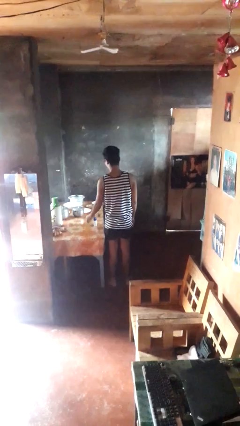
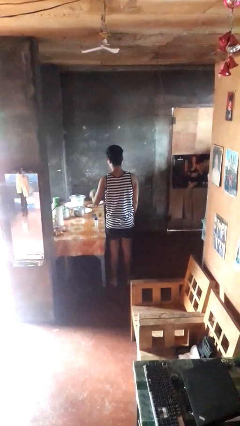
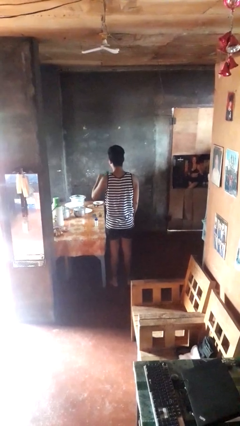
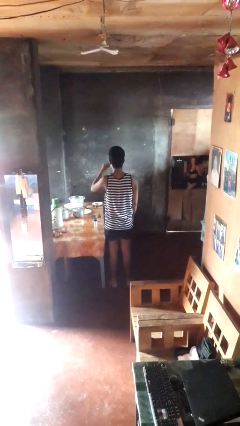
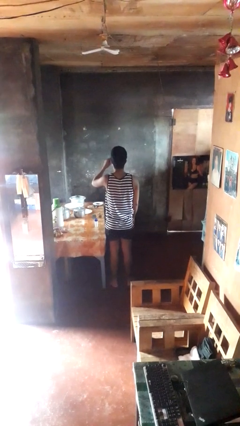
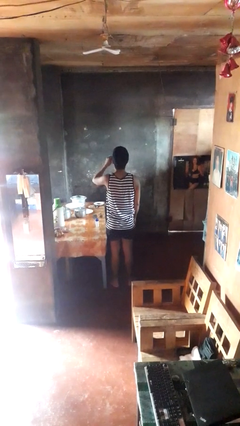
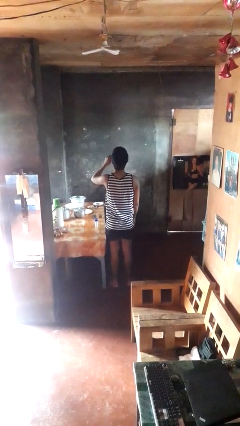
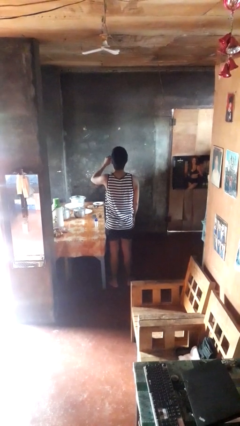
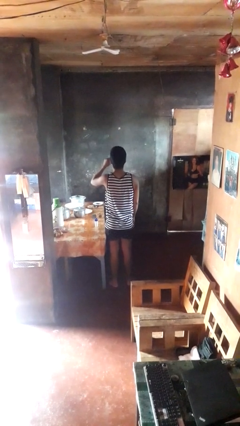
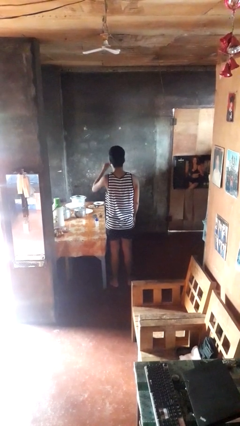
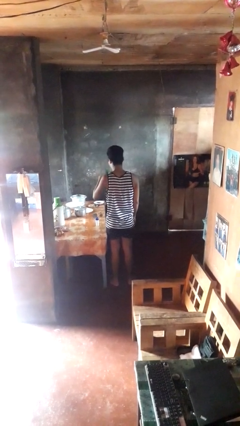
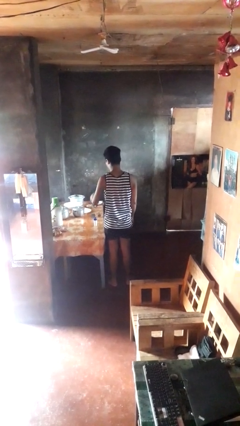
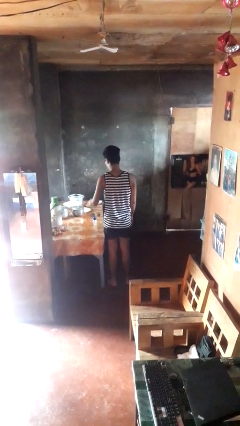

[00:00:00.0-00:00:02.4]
person drinks from cup

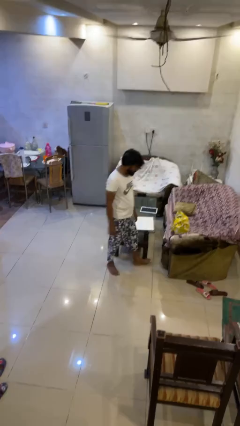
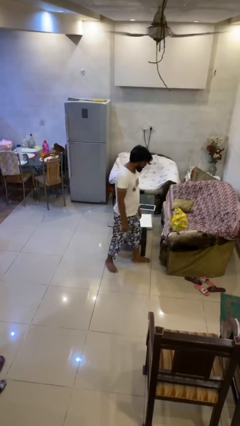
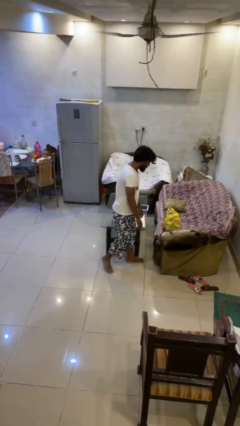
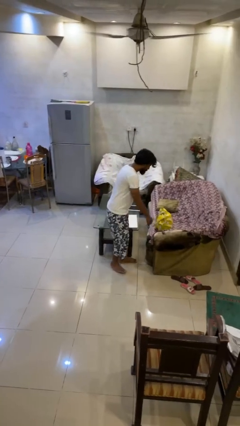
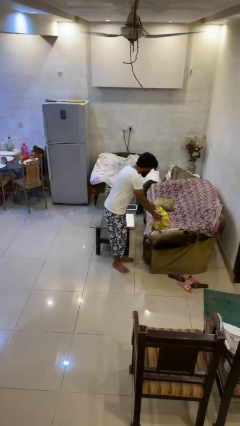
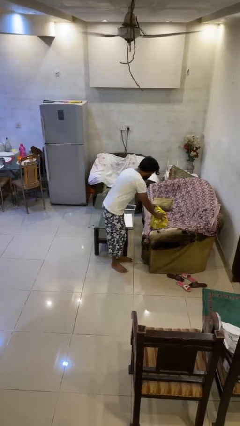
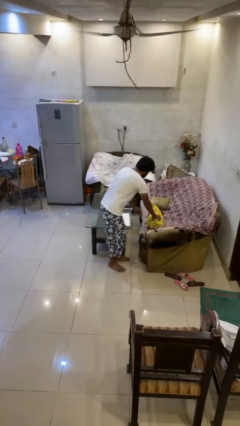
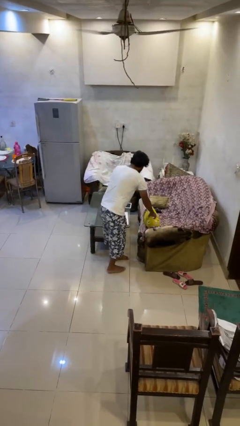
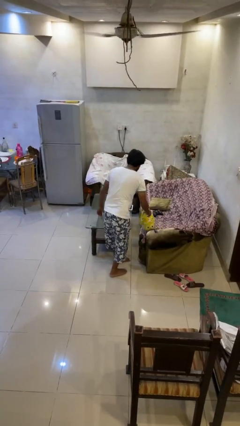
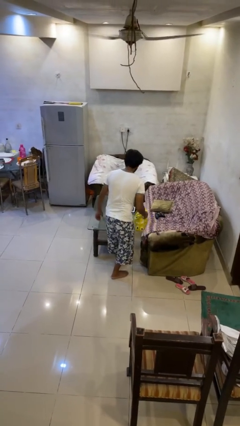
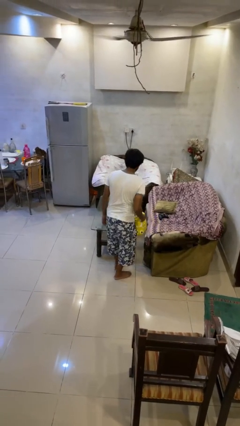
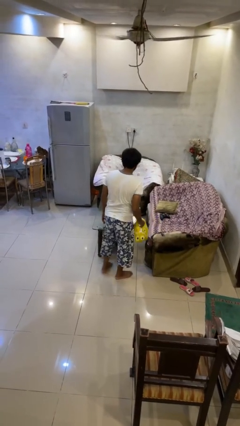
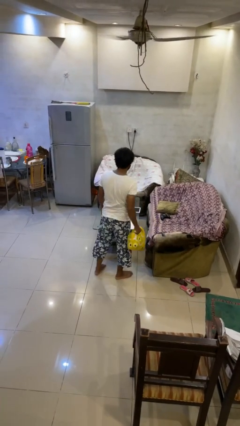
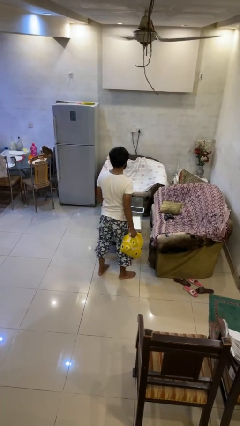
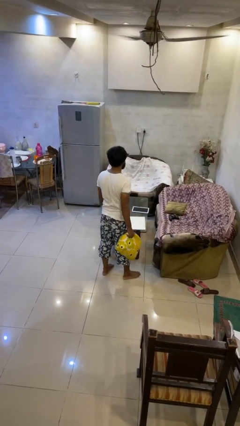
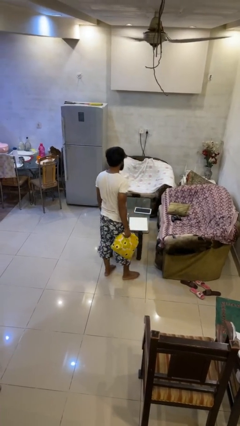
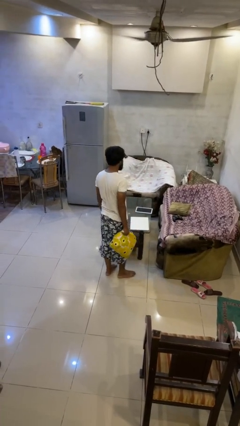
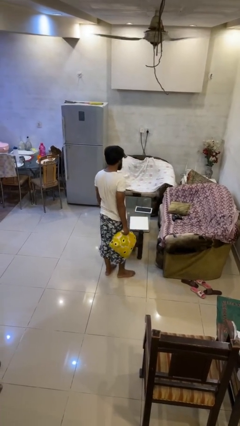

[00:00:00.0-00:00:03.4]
person picks up object from couch

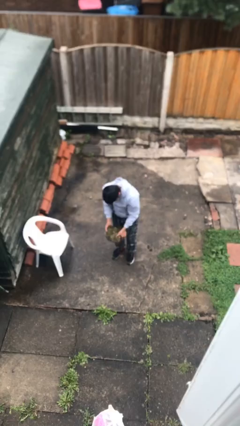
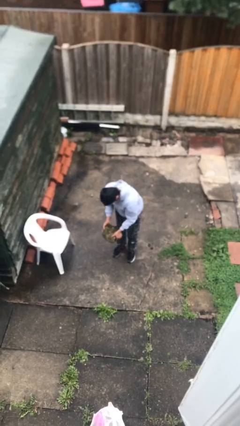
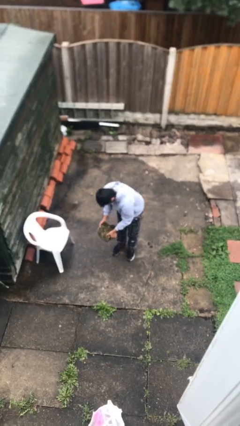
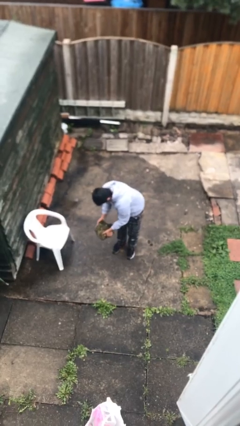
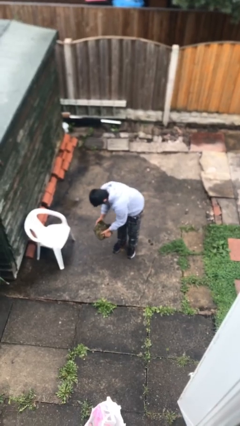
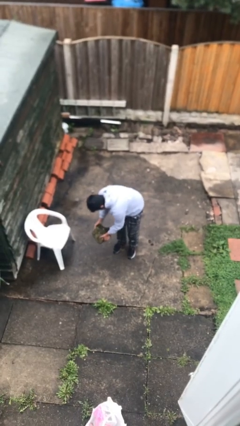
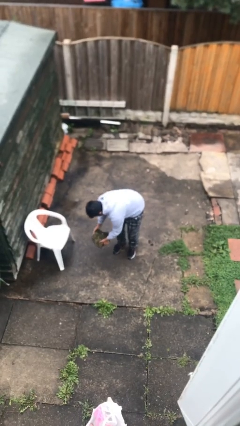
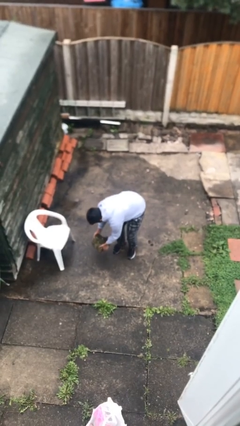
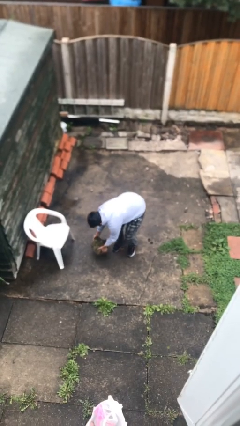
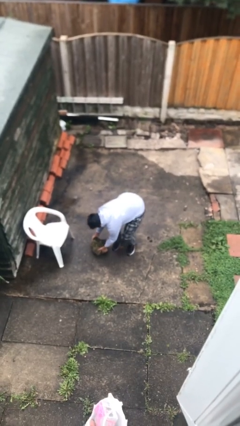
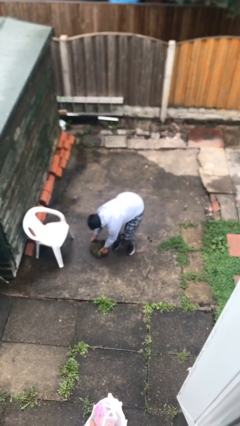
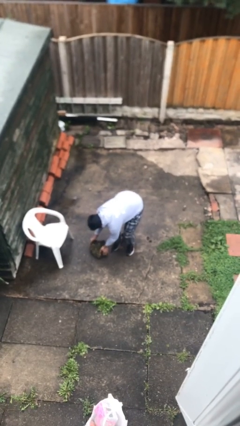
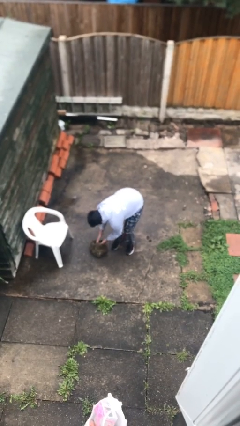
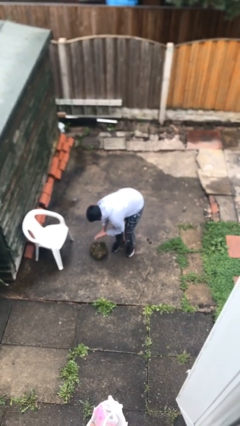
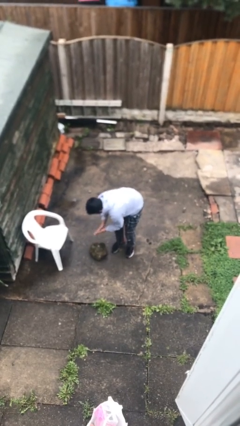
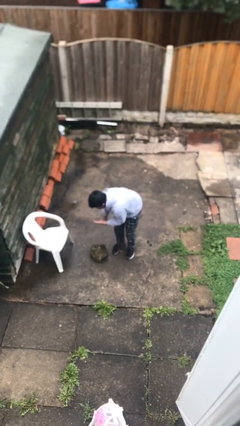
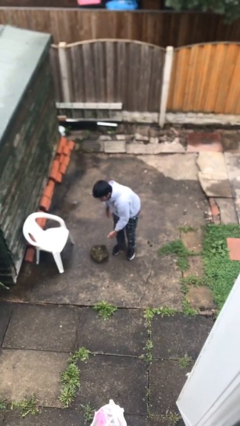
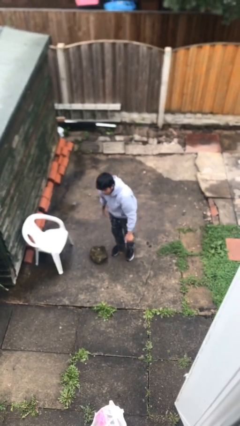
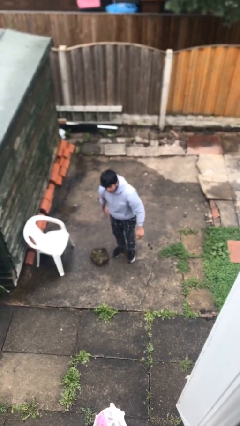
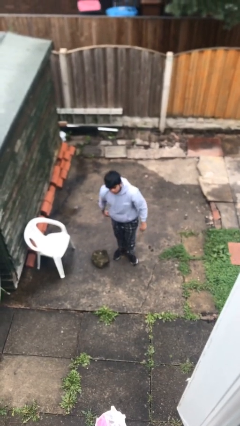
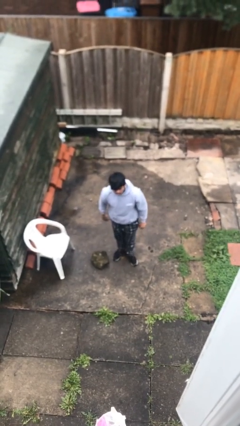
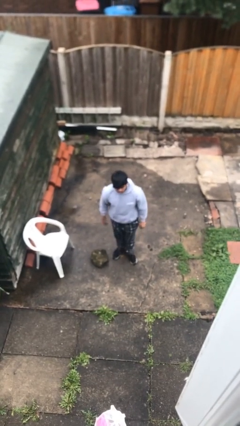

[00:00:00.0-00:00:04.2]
person puts down object on floor

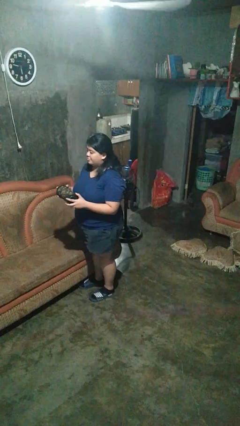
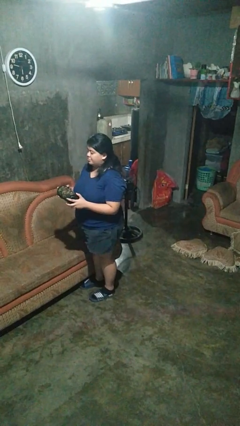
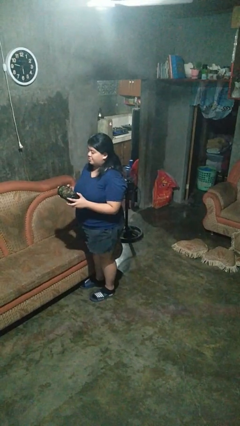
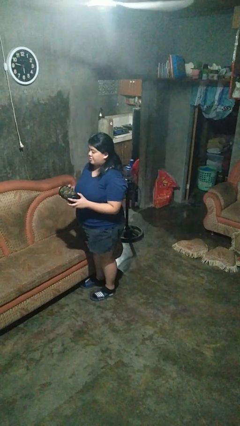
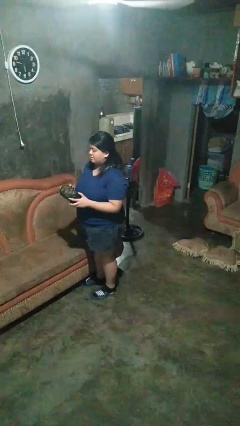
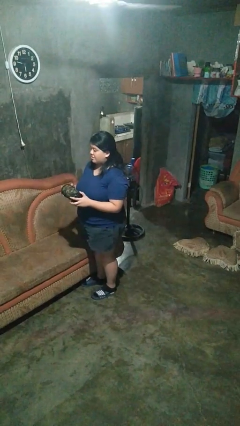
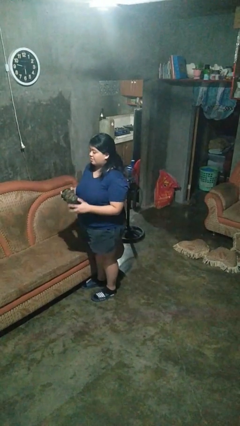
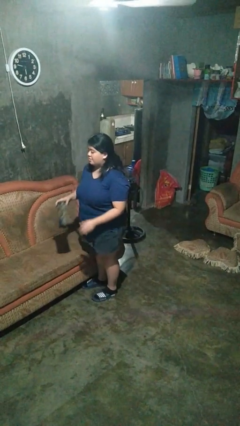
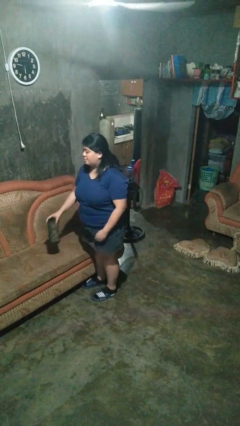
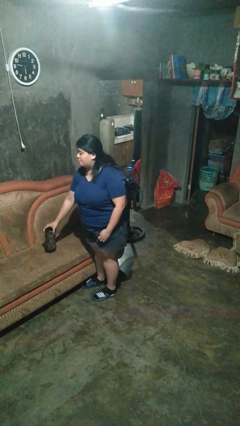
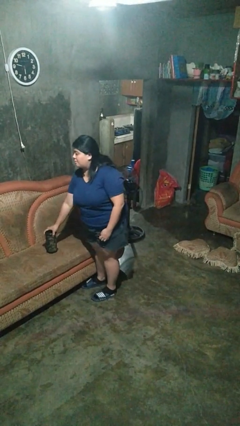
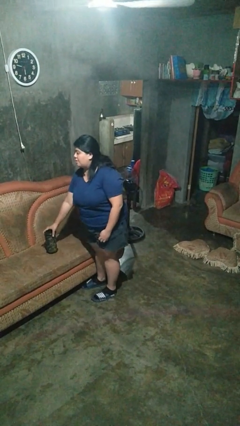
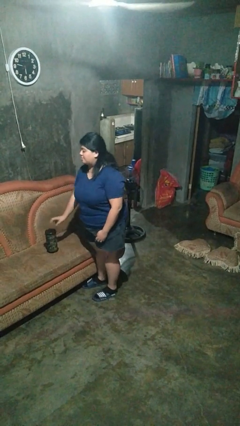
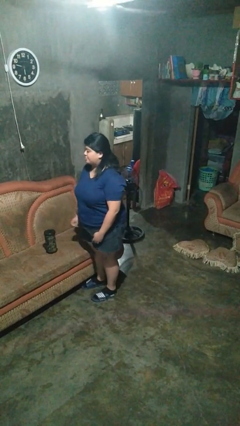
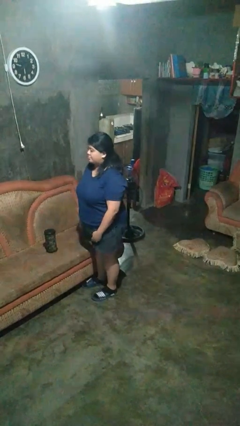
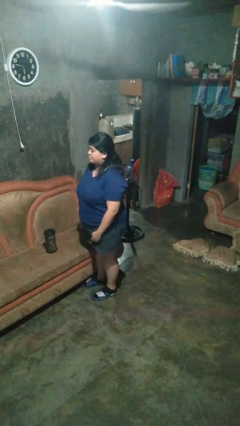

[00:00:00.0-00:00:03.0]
person puts down object on couch

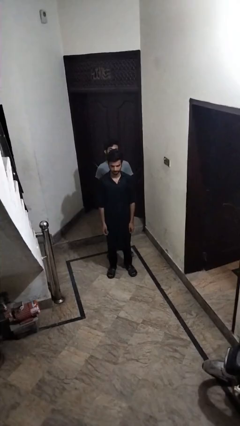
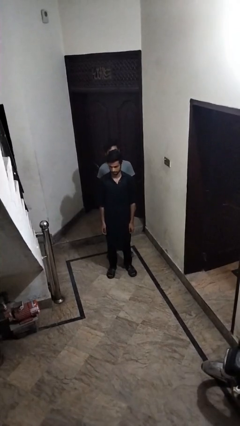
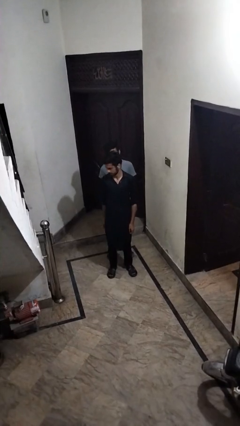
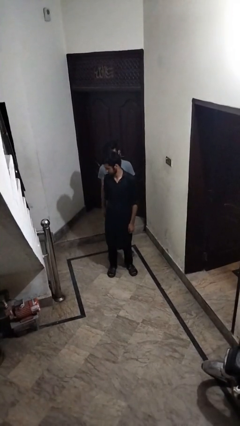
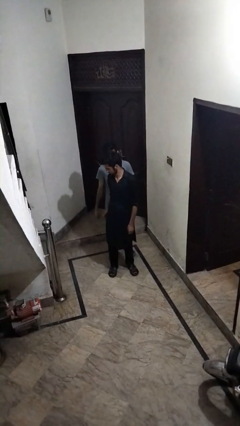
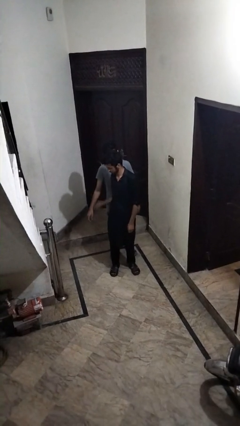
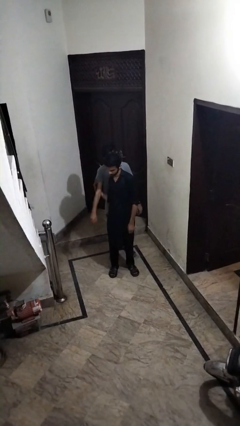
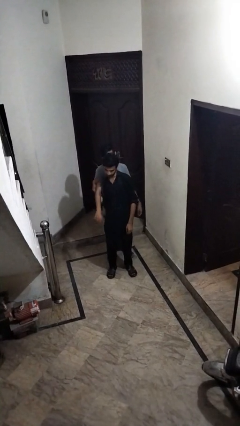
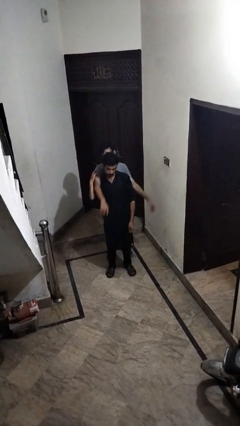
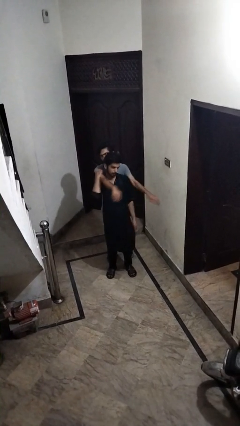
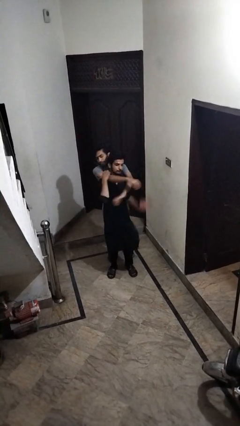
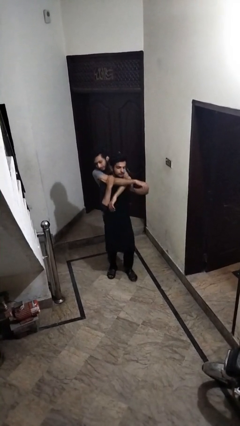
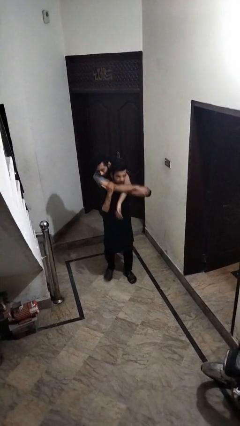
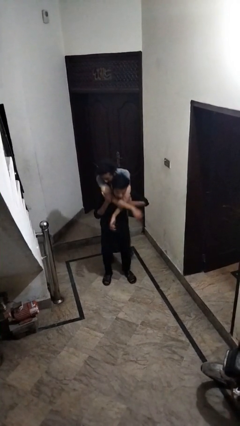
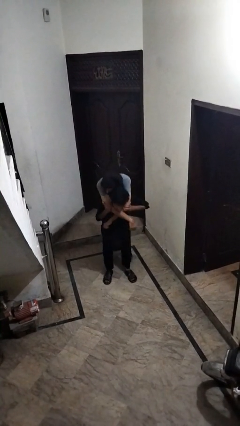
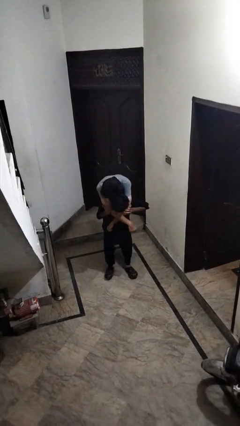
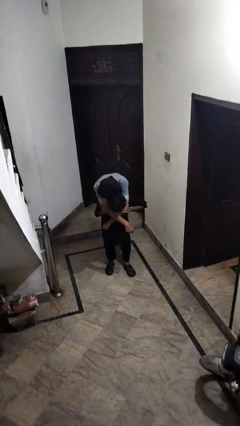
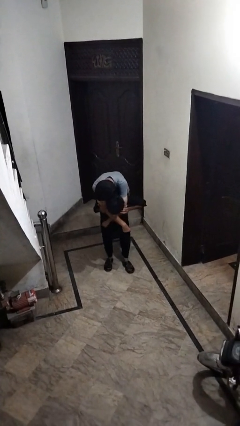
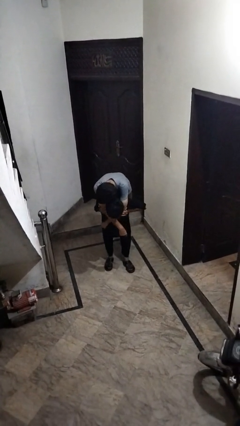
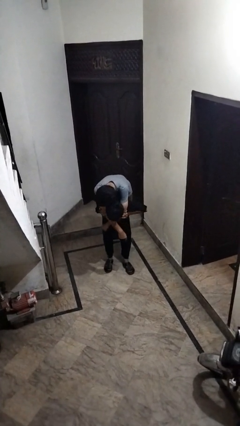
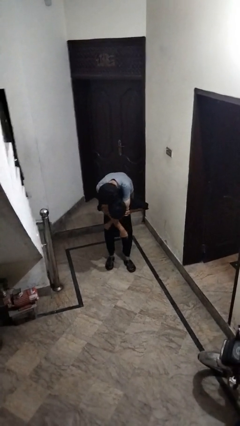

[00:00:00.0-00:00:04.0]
person carries person over shoulder

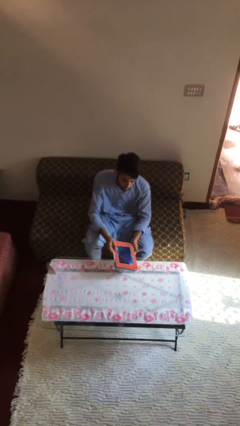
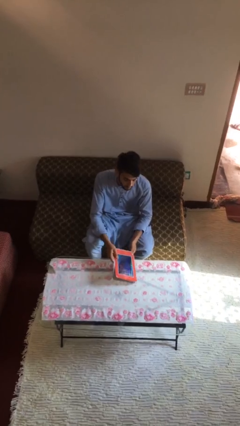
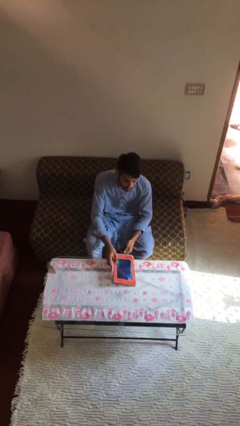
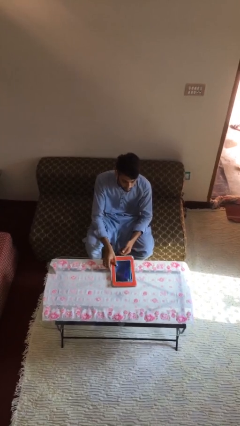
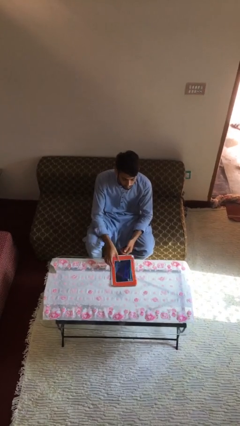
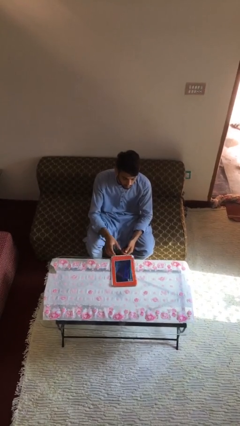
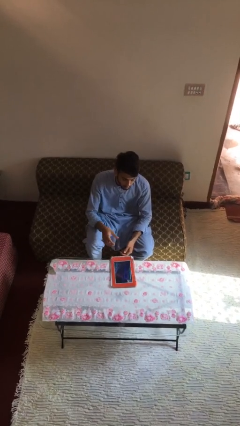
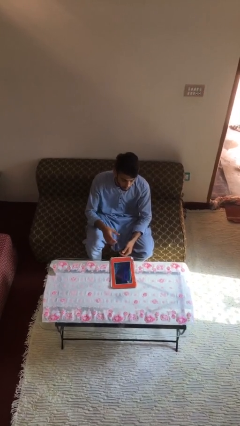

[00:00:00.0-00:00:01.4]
person puts down object on table
